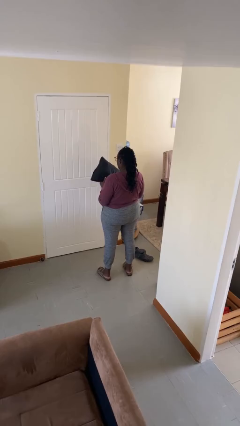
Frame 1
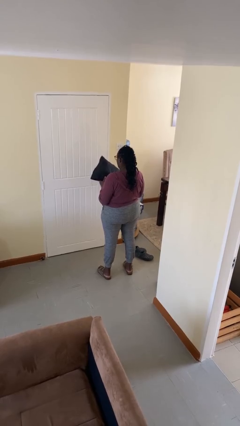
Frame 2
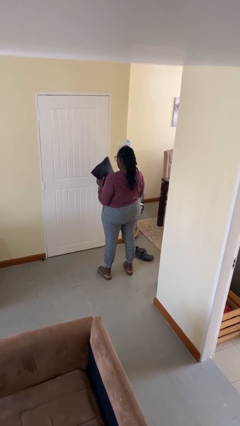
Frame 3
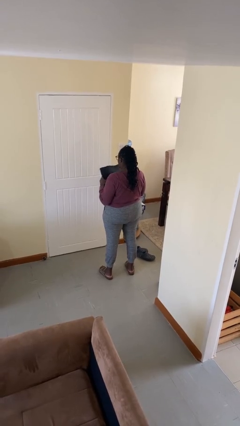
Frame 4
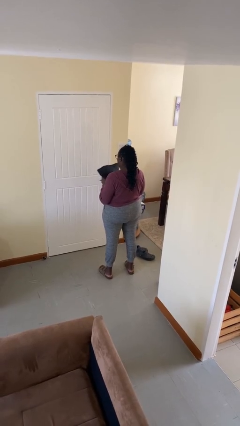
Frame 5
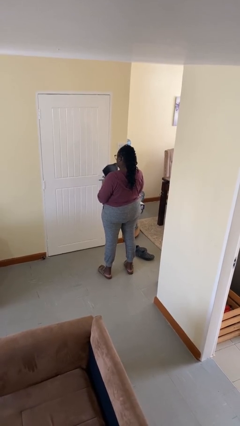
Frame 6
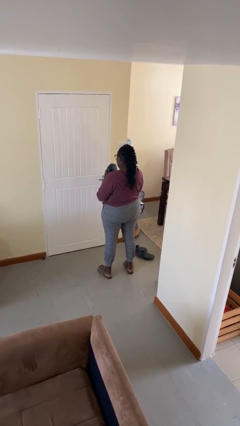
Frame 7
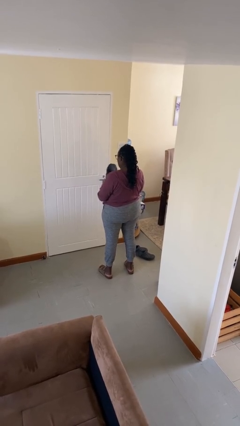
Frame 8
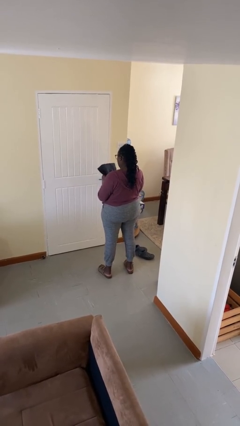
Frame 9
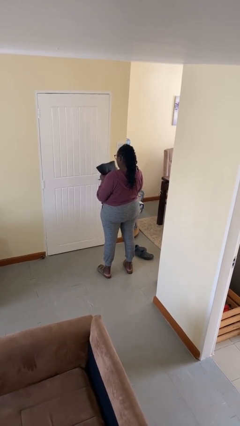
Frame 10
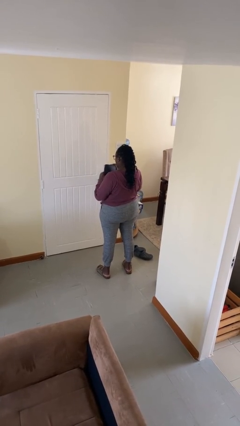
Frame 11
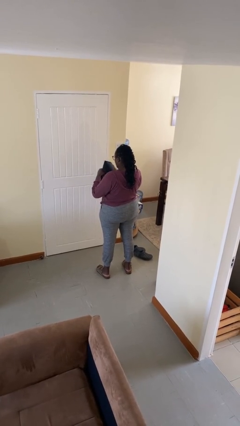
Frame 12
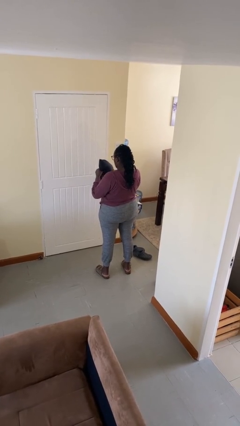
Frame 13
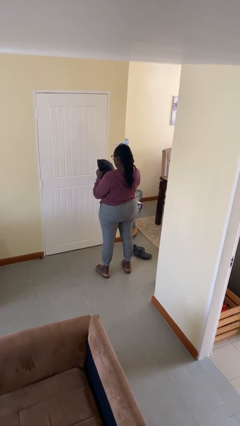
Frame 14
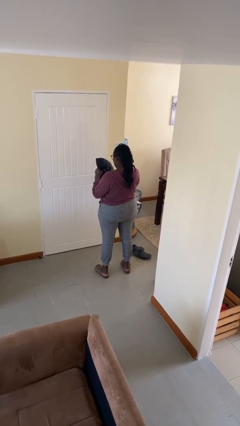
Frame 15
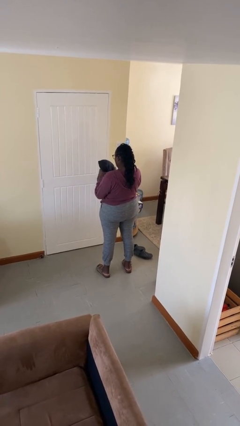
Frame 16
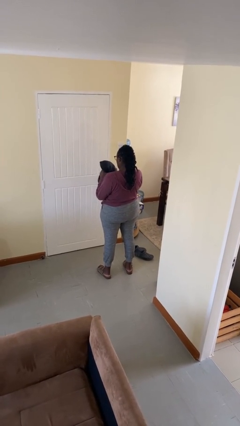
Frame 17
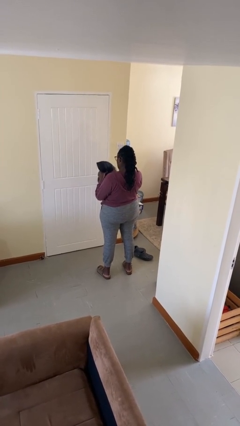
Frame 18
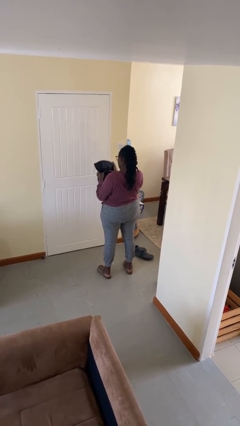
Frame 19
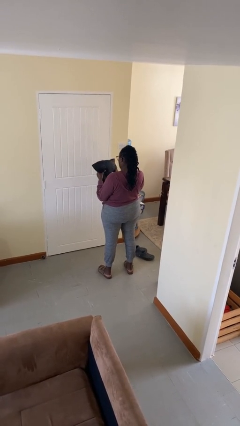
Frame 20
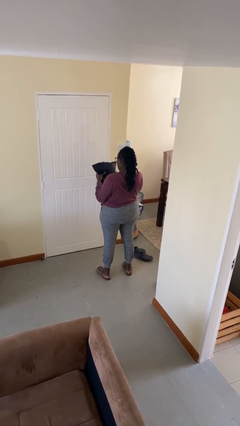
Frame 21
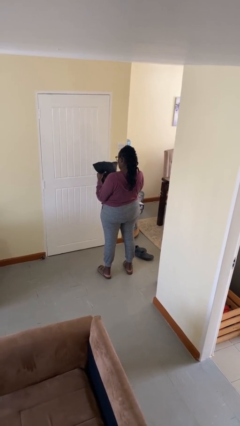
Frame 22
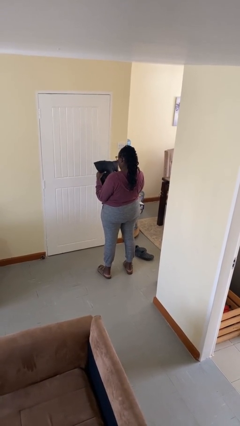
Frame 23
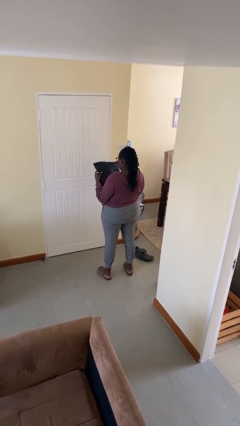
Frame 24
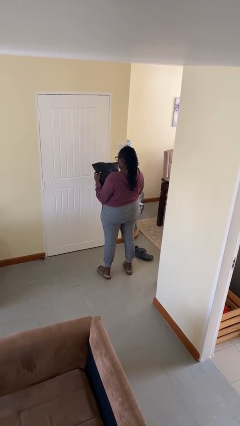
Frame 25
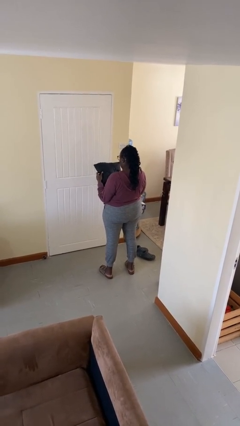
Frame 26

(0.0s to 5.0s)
person squeezes object

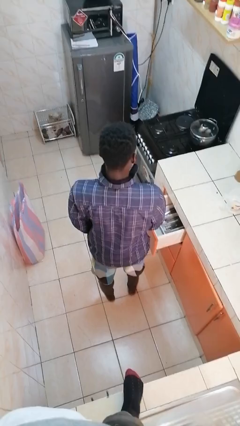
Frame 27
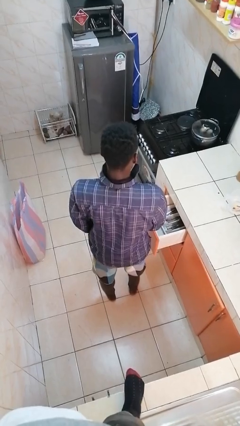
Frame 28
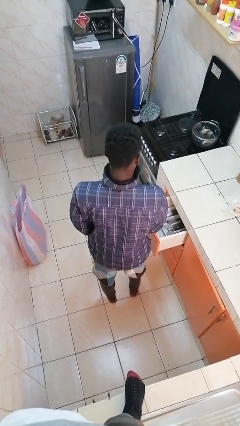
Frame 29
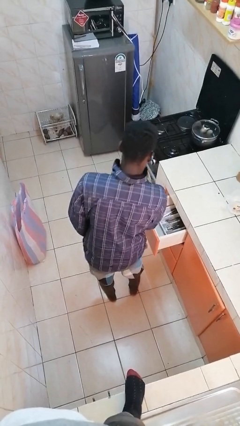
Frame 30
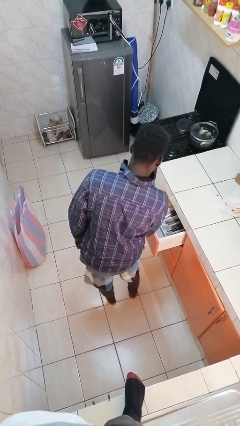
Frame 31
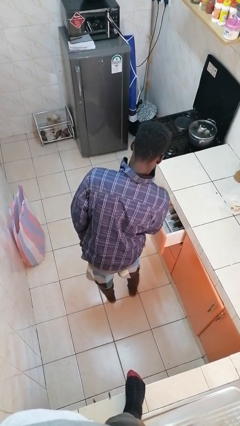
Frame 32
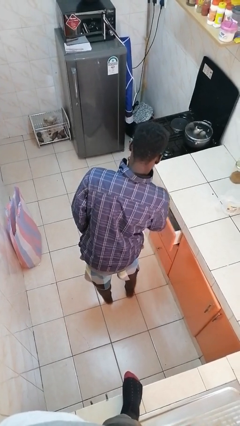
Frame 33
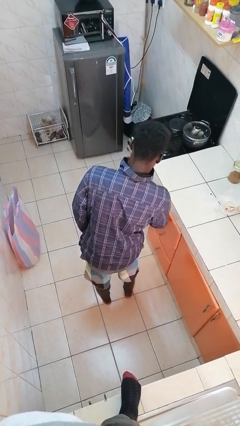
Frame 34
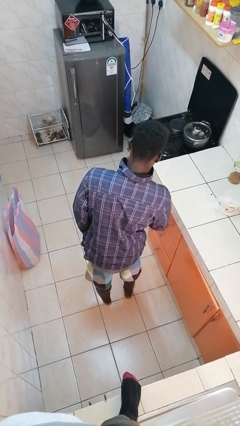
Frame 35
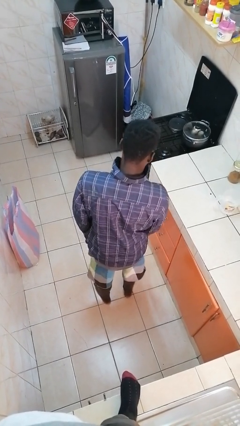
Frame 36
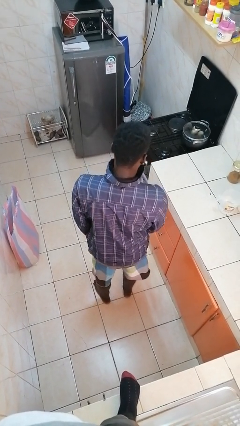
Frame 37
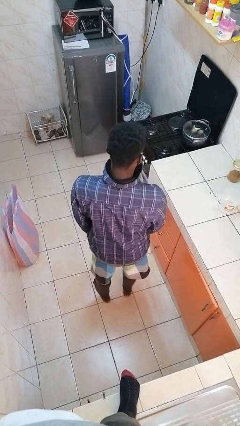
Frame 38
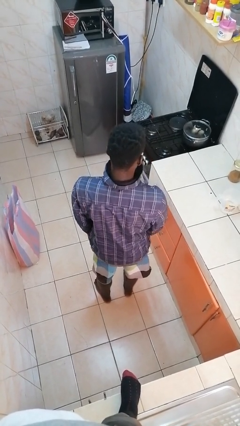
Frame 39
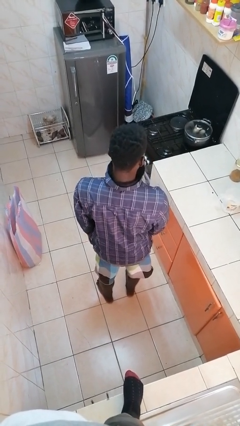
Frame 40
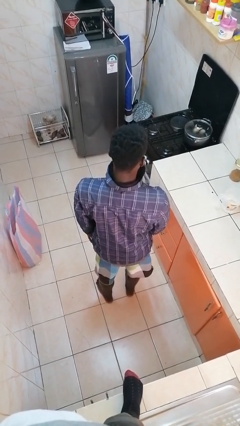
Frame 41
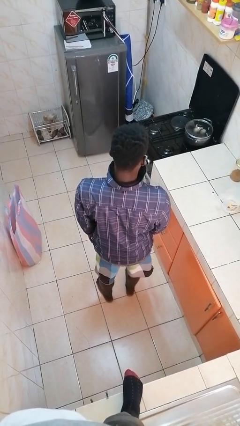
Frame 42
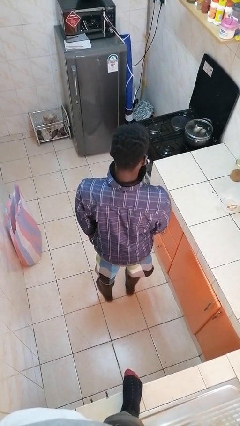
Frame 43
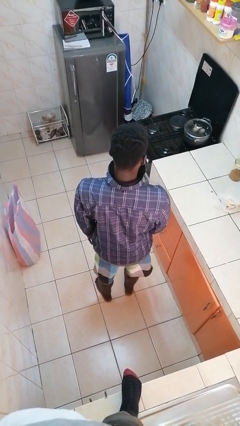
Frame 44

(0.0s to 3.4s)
person closes kitchen drawer

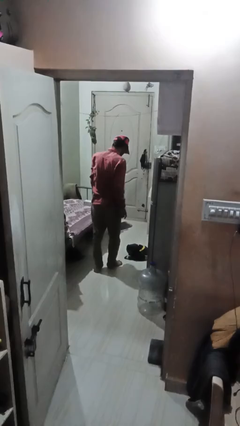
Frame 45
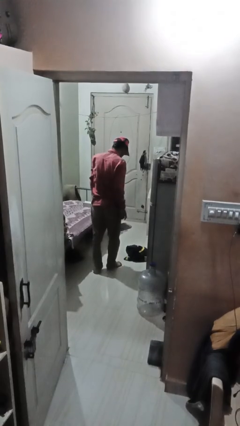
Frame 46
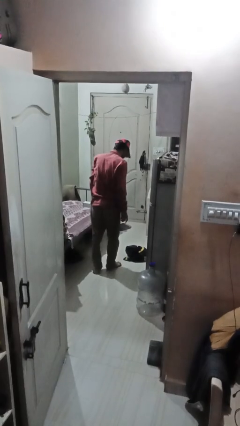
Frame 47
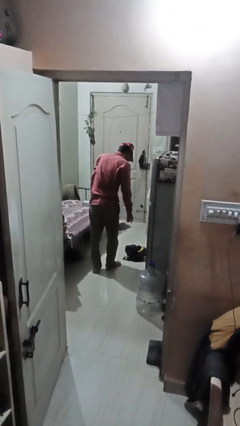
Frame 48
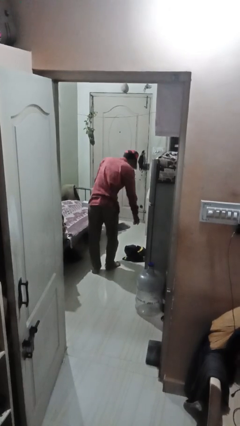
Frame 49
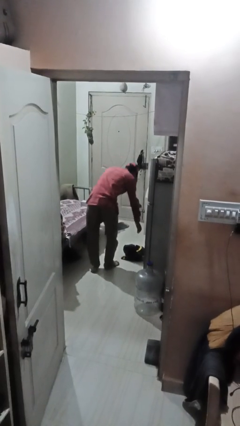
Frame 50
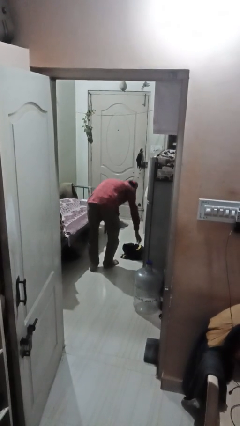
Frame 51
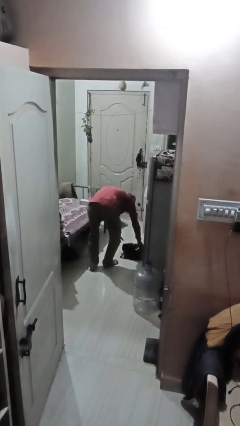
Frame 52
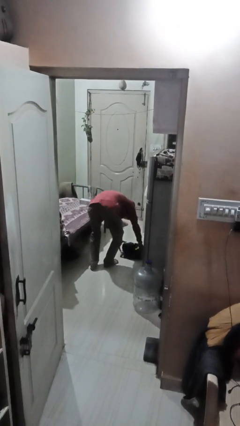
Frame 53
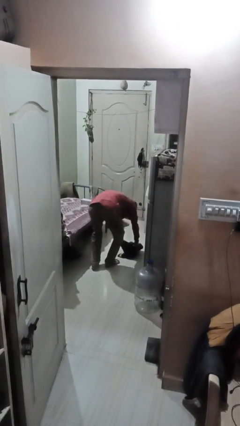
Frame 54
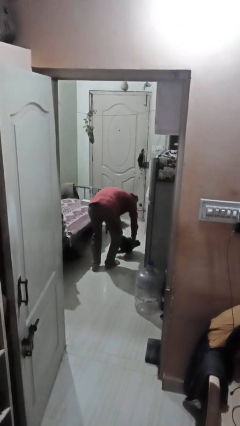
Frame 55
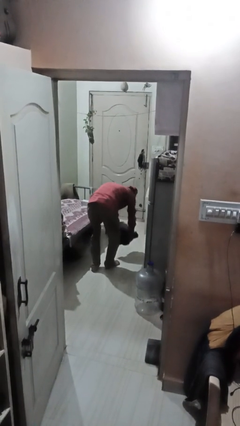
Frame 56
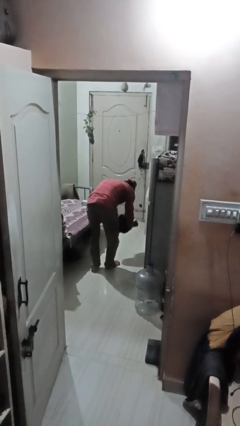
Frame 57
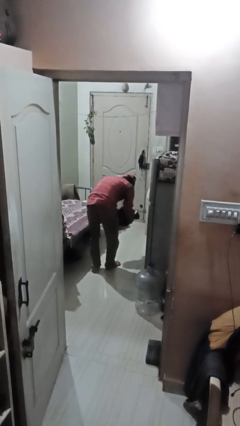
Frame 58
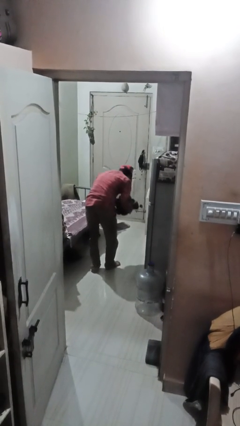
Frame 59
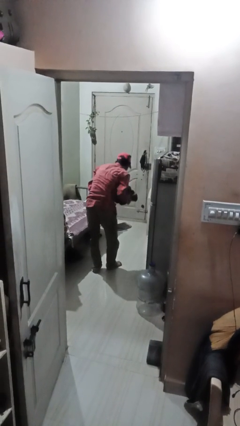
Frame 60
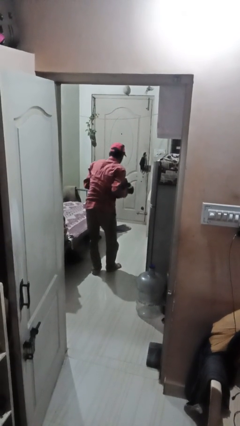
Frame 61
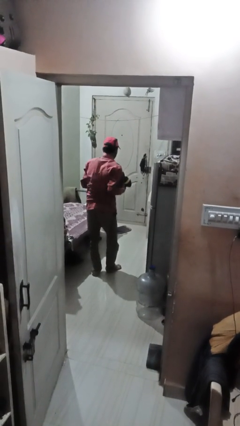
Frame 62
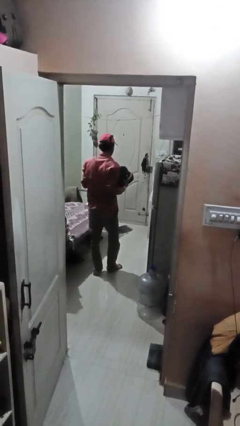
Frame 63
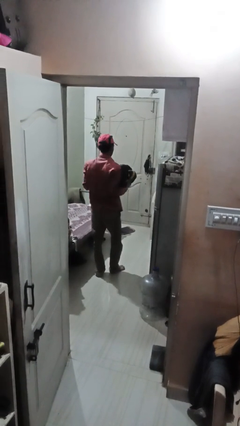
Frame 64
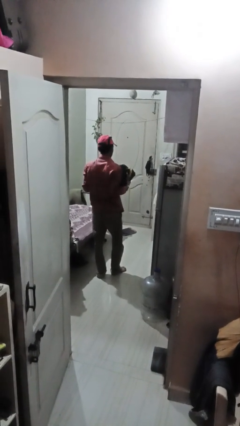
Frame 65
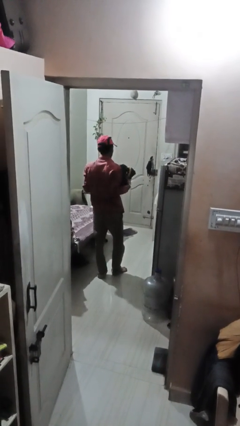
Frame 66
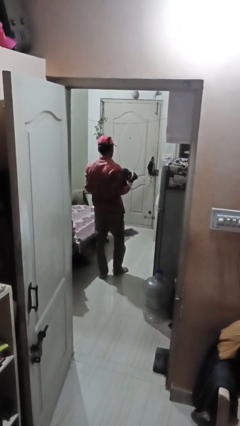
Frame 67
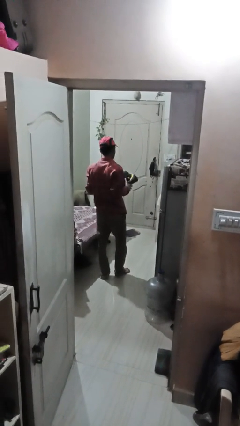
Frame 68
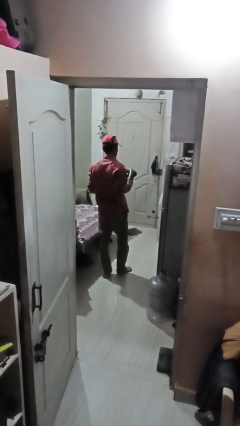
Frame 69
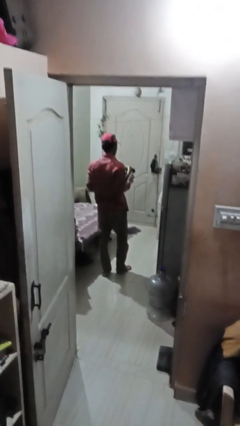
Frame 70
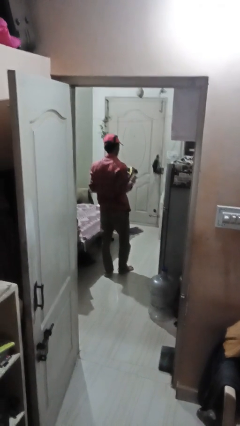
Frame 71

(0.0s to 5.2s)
person picks up object from floor

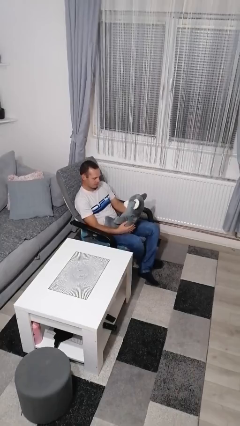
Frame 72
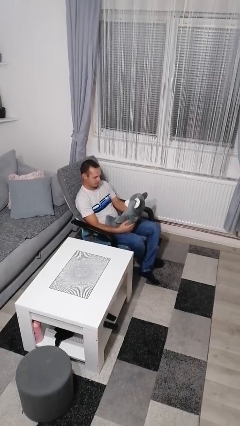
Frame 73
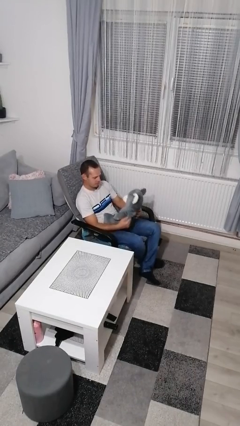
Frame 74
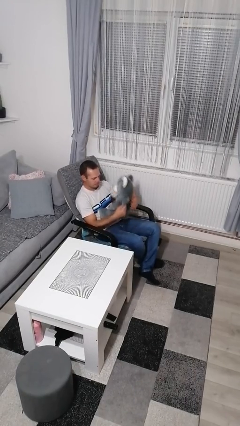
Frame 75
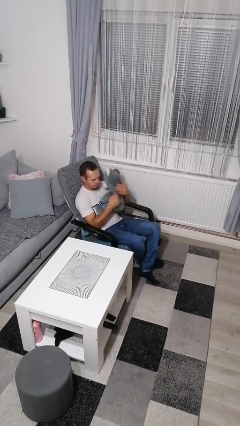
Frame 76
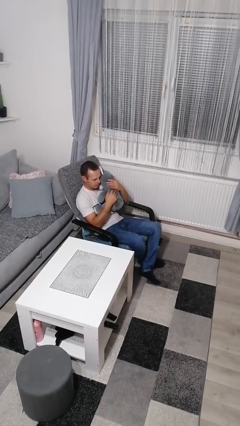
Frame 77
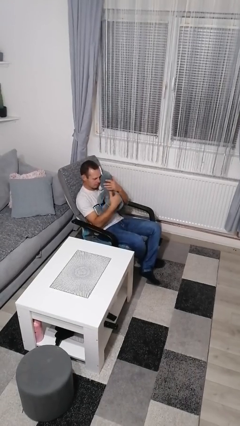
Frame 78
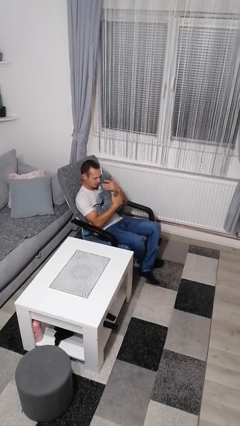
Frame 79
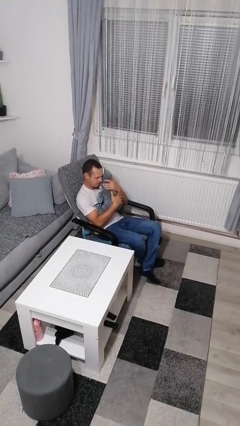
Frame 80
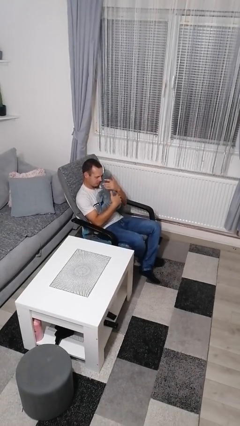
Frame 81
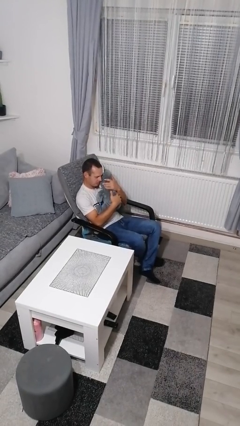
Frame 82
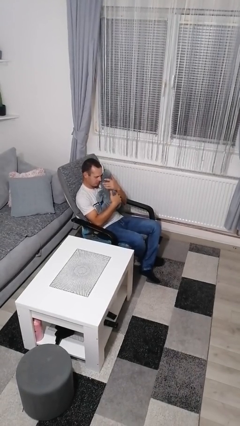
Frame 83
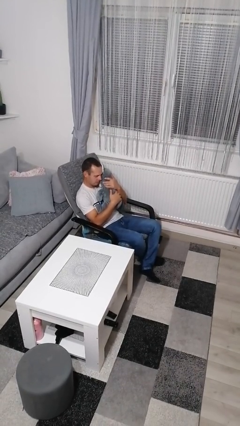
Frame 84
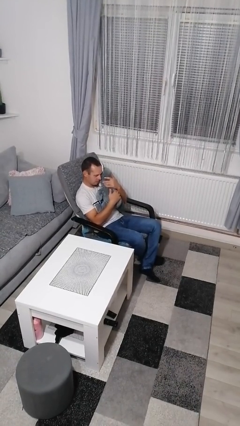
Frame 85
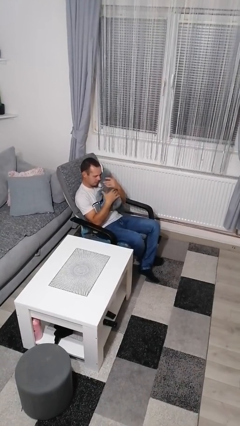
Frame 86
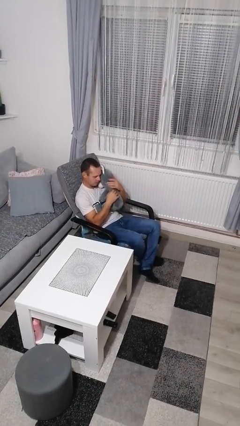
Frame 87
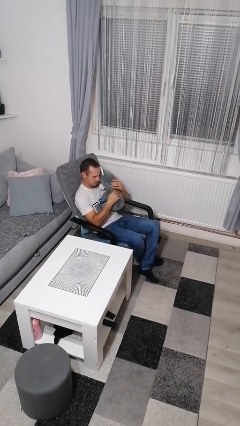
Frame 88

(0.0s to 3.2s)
person hugs stuffed animal

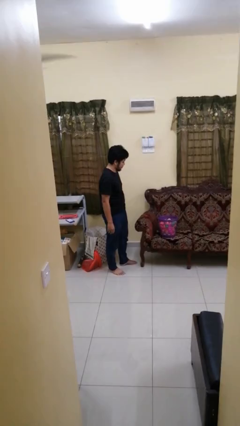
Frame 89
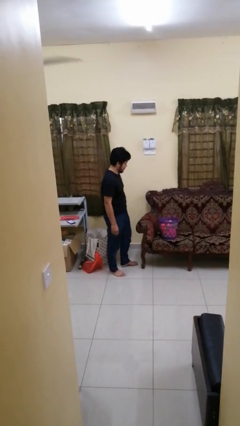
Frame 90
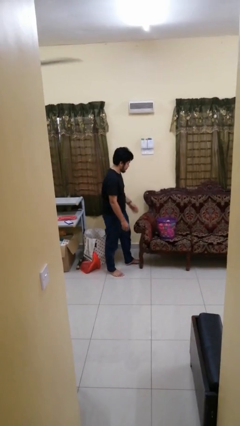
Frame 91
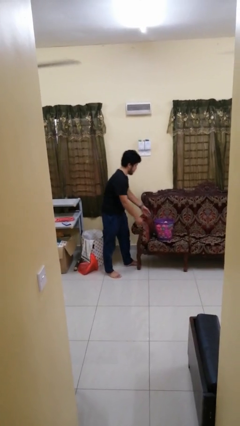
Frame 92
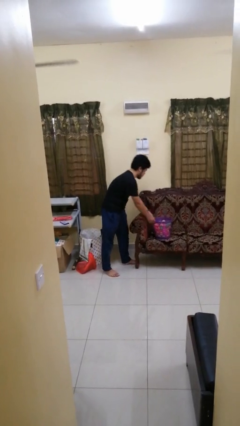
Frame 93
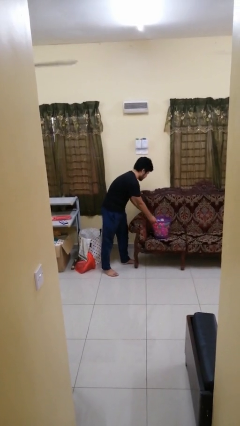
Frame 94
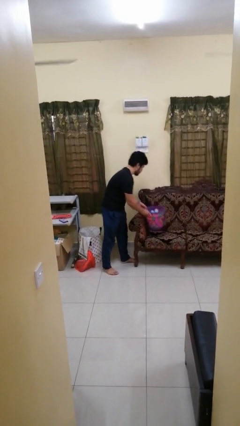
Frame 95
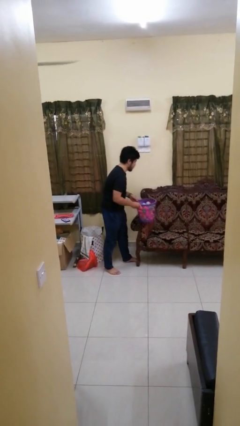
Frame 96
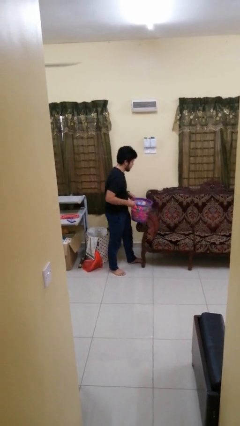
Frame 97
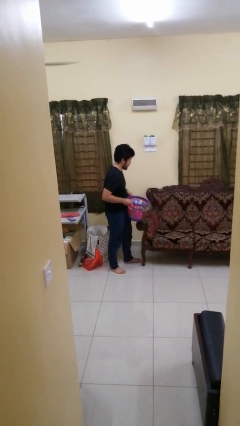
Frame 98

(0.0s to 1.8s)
person puts down object on couch
